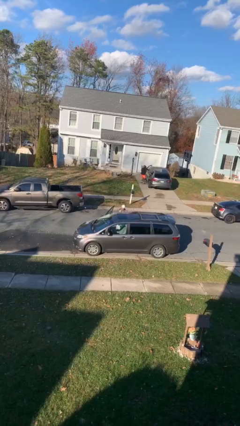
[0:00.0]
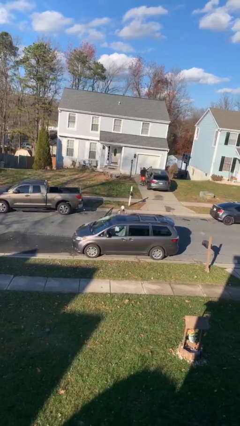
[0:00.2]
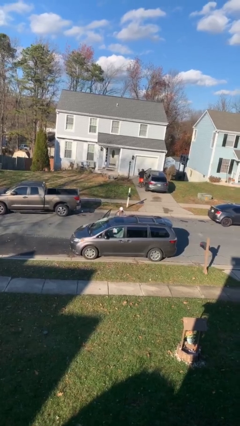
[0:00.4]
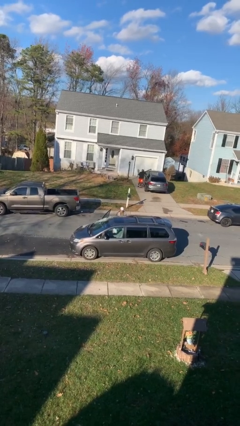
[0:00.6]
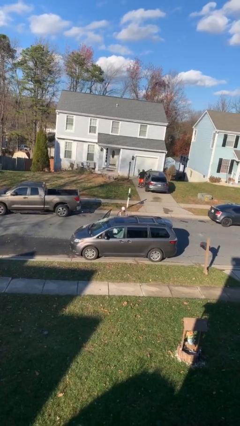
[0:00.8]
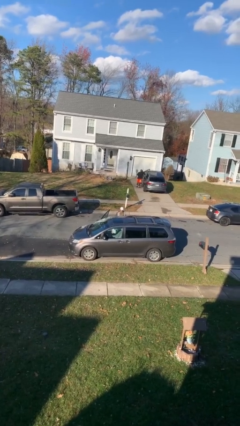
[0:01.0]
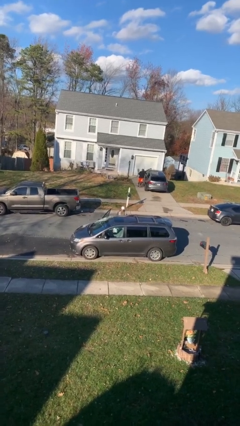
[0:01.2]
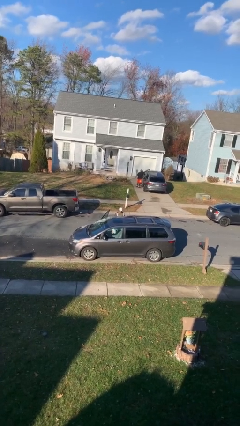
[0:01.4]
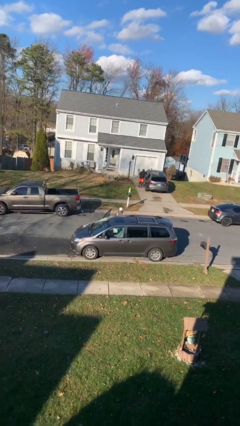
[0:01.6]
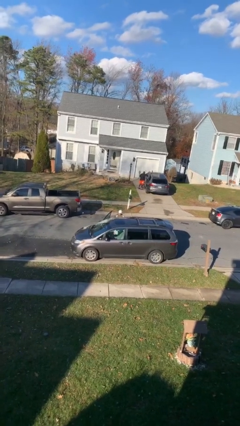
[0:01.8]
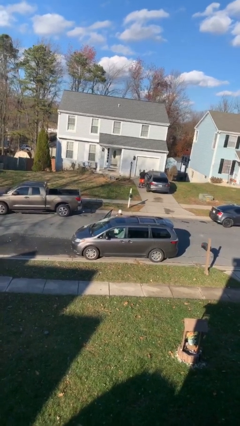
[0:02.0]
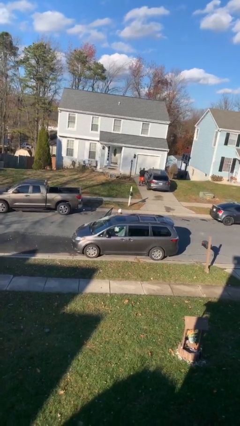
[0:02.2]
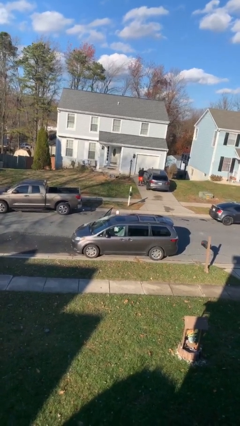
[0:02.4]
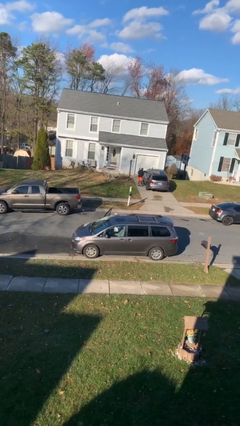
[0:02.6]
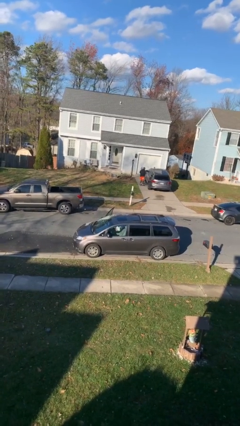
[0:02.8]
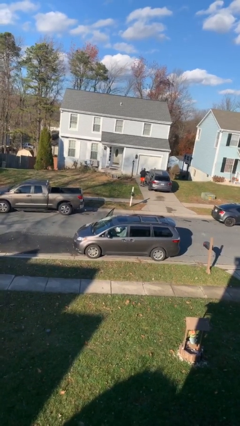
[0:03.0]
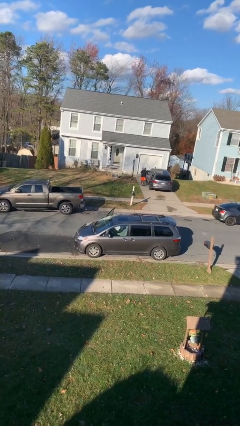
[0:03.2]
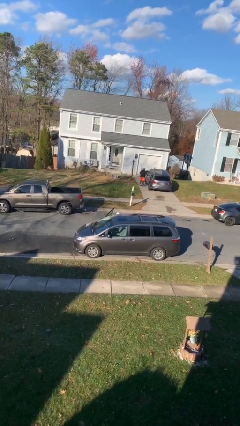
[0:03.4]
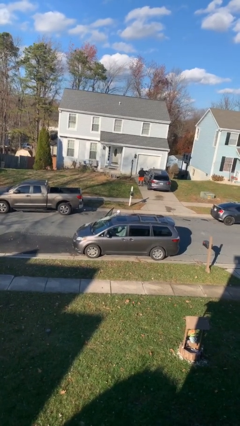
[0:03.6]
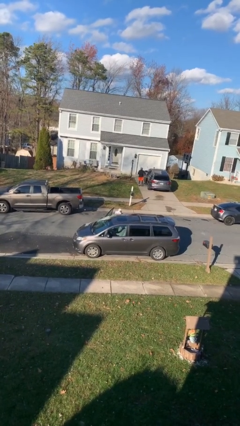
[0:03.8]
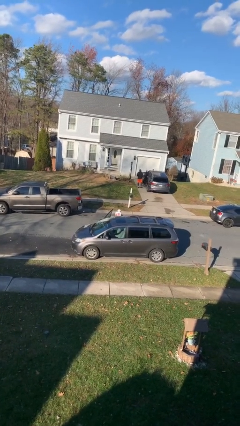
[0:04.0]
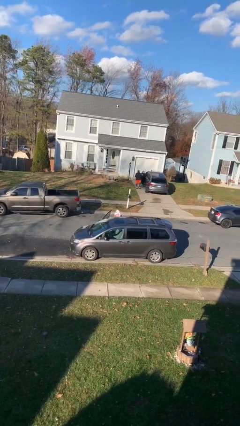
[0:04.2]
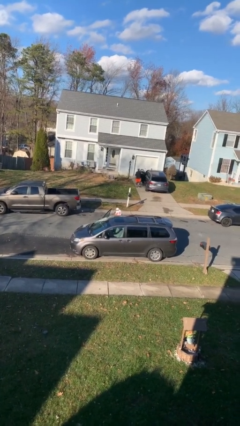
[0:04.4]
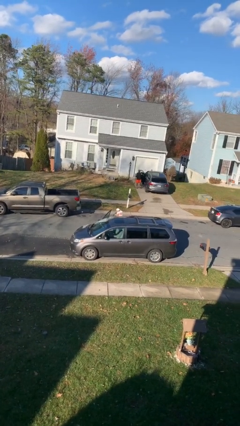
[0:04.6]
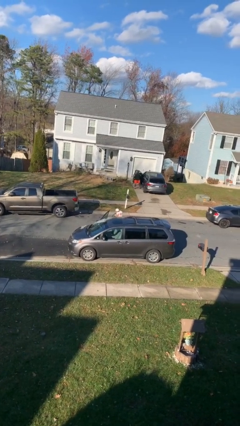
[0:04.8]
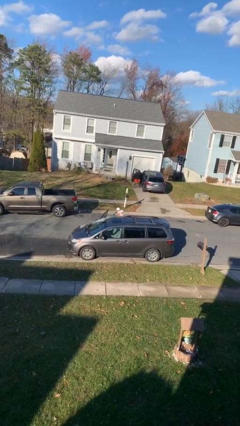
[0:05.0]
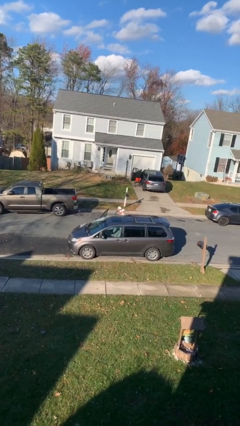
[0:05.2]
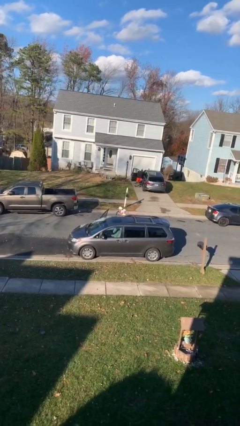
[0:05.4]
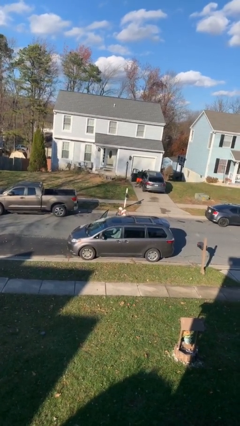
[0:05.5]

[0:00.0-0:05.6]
person unloads car

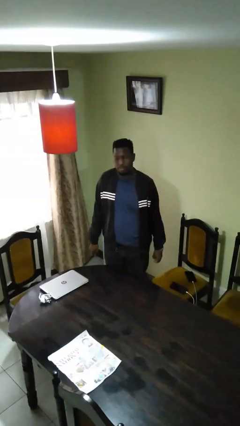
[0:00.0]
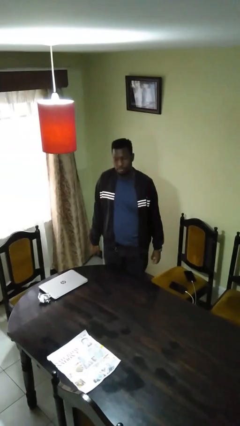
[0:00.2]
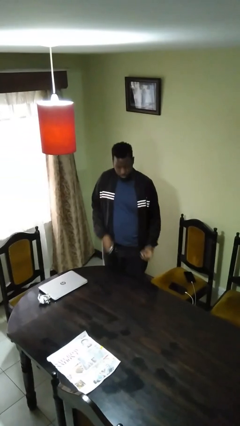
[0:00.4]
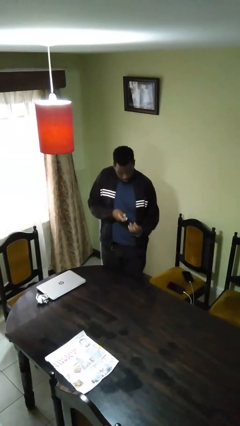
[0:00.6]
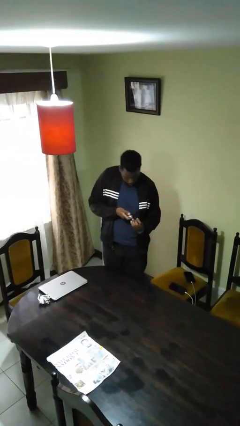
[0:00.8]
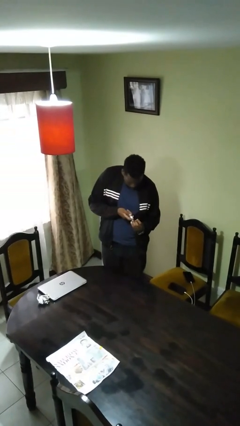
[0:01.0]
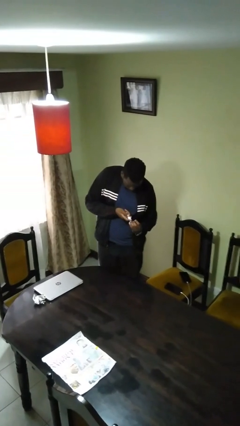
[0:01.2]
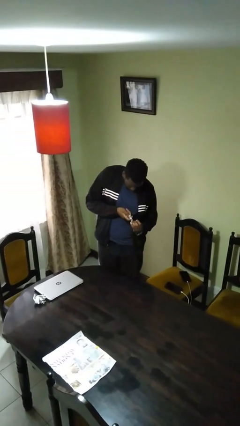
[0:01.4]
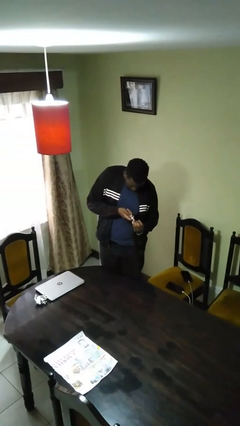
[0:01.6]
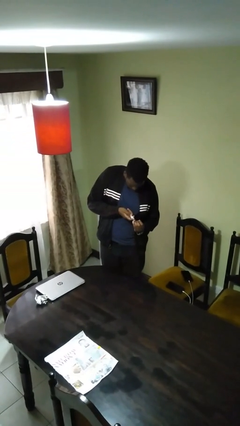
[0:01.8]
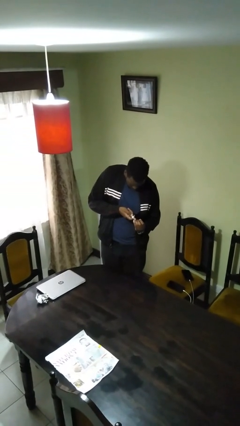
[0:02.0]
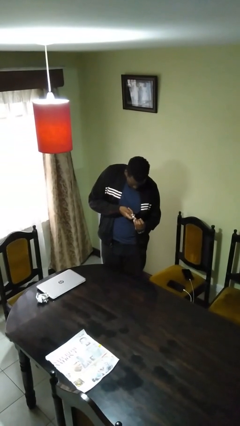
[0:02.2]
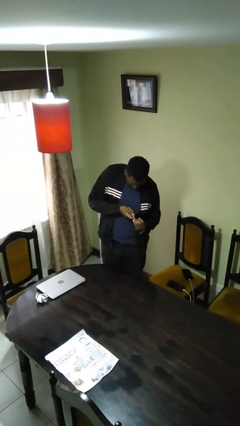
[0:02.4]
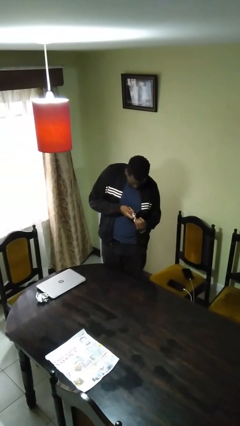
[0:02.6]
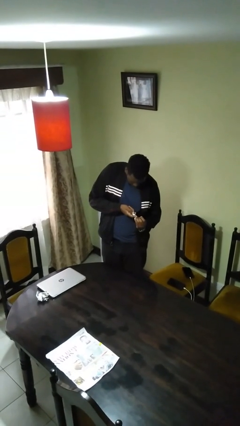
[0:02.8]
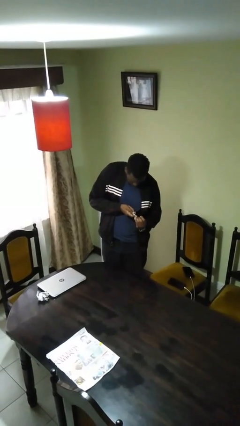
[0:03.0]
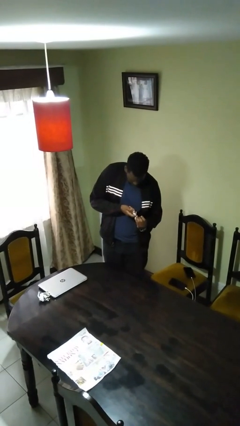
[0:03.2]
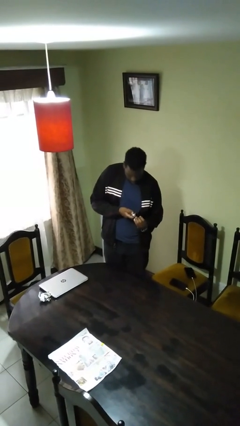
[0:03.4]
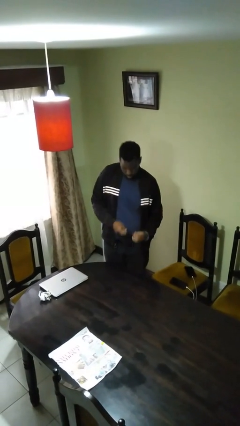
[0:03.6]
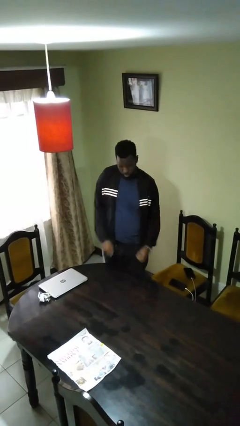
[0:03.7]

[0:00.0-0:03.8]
person clips fingernails

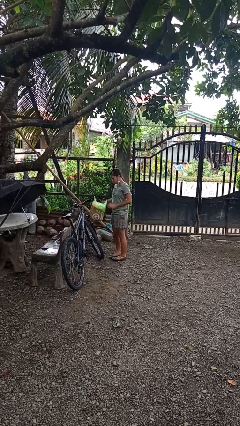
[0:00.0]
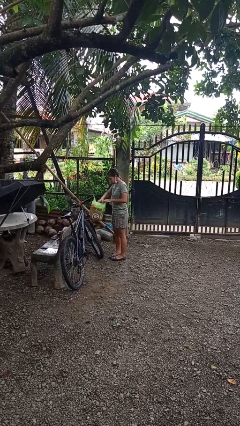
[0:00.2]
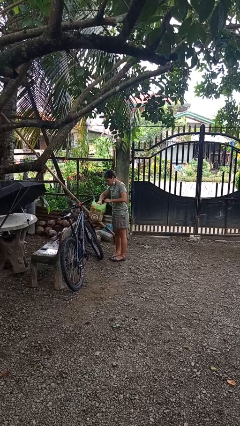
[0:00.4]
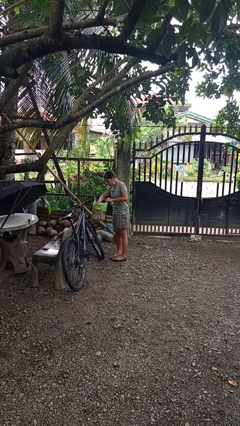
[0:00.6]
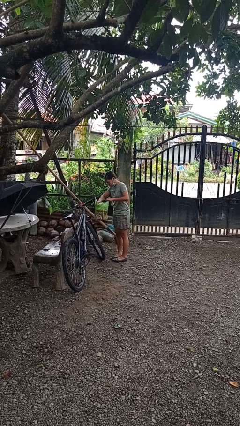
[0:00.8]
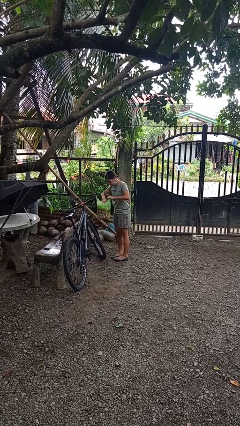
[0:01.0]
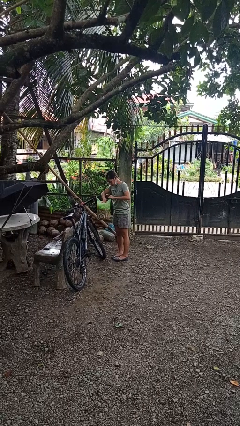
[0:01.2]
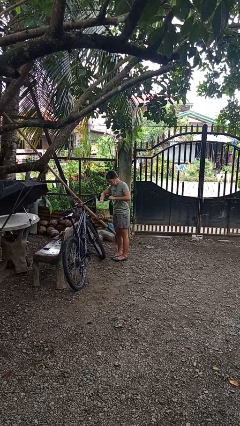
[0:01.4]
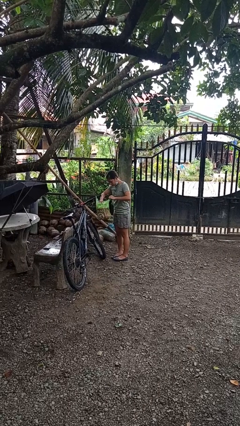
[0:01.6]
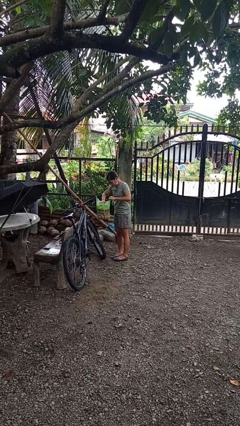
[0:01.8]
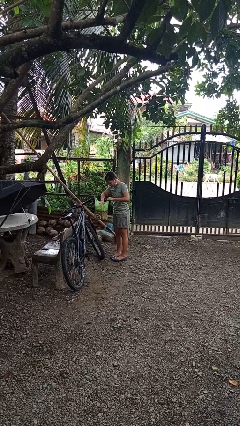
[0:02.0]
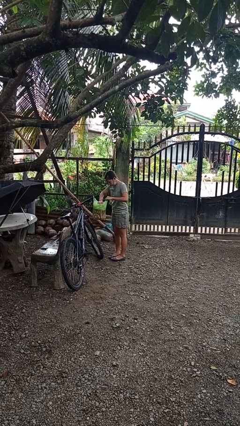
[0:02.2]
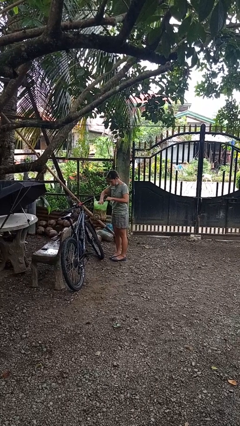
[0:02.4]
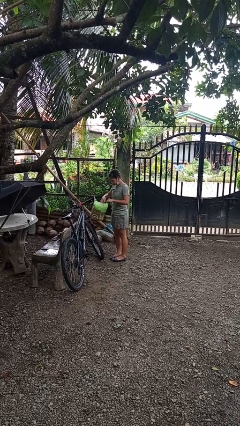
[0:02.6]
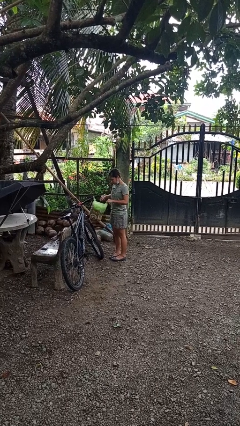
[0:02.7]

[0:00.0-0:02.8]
person searches in bag

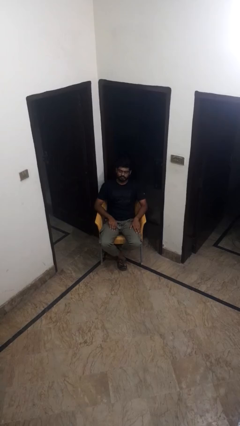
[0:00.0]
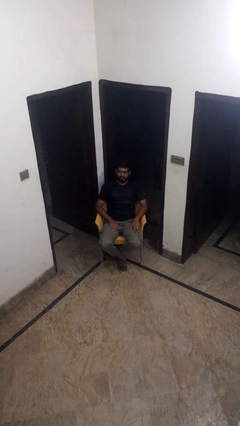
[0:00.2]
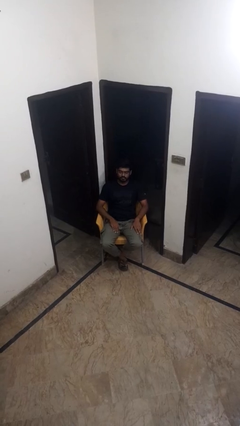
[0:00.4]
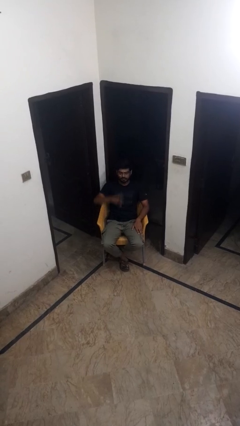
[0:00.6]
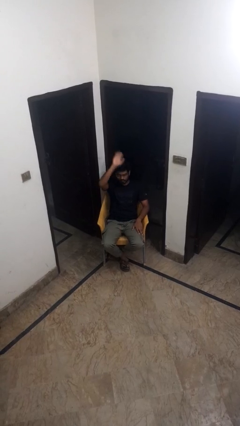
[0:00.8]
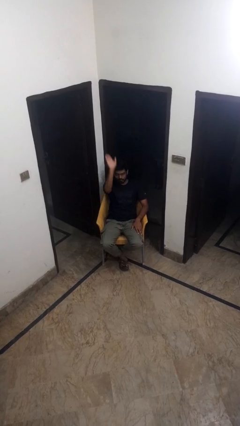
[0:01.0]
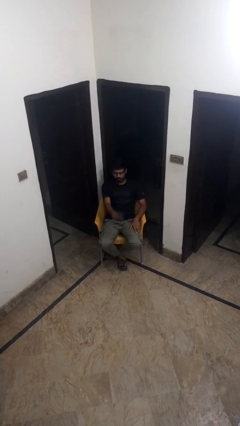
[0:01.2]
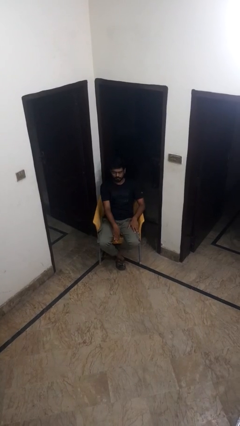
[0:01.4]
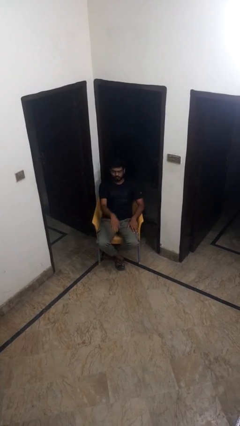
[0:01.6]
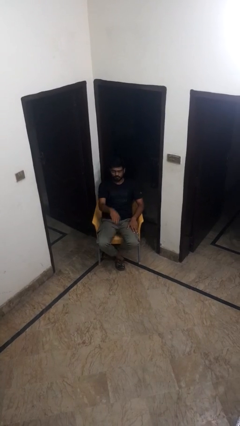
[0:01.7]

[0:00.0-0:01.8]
person gestures swipe down

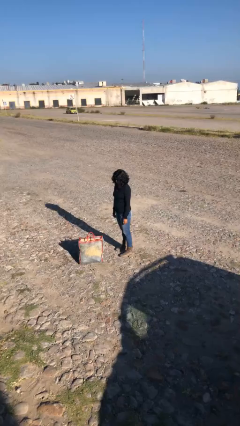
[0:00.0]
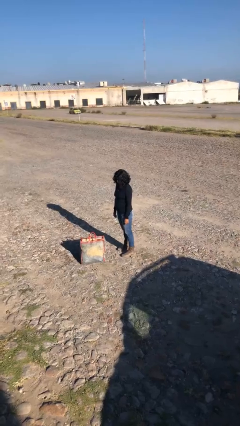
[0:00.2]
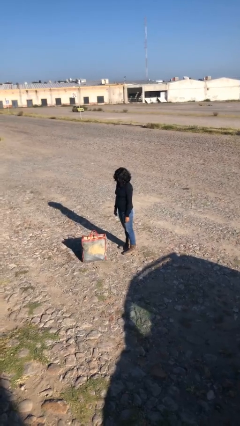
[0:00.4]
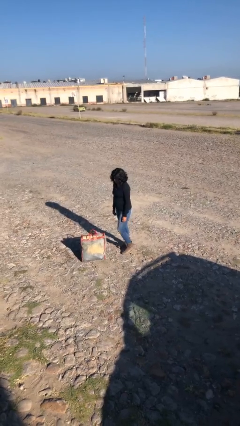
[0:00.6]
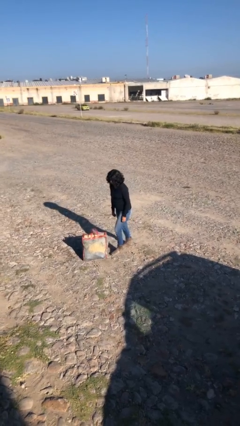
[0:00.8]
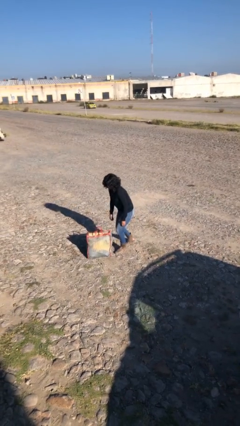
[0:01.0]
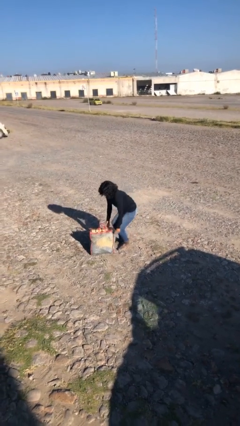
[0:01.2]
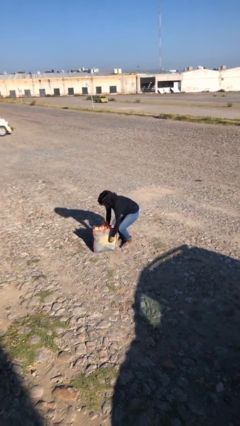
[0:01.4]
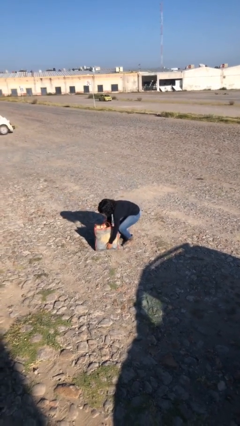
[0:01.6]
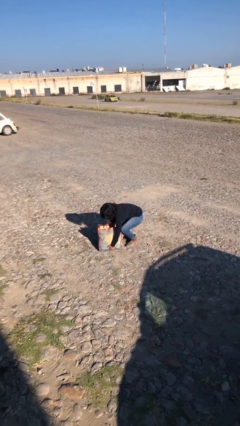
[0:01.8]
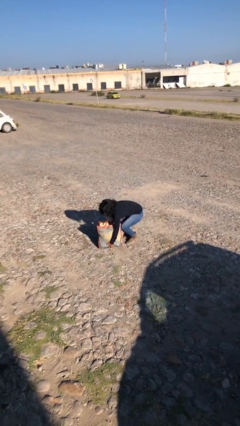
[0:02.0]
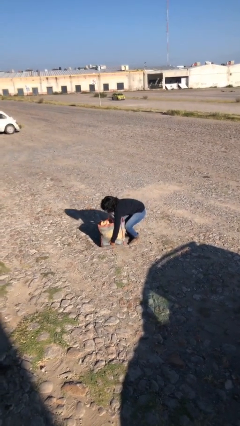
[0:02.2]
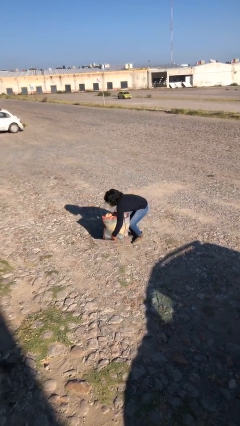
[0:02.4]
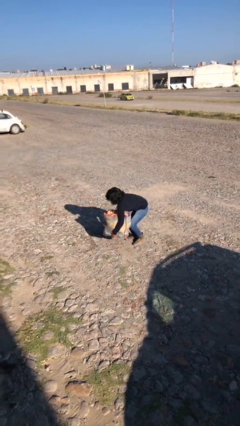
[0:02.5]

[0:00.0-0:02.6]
person picks up object from floor

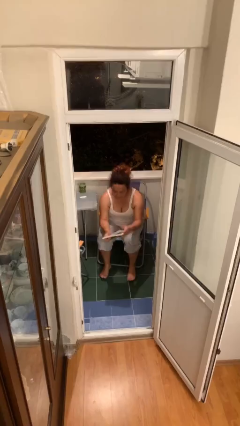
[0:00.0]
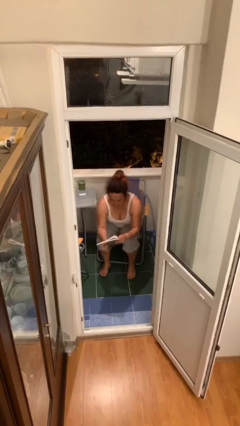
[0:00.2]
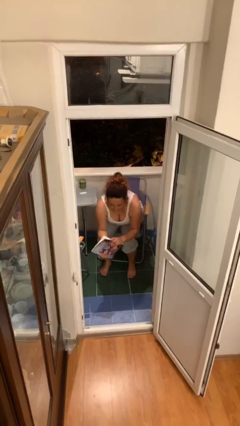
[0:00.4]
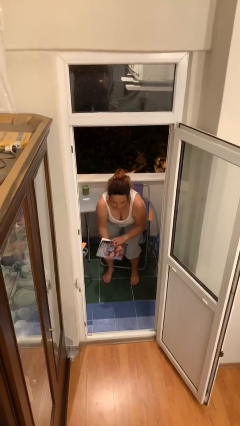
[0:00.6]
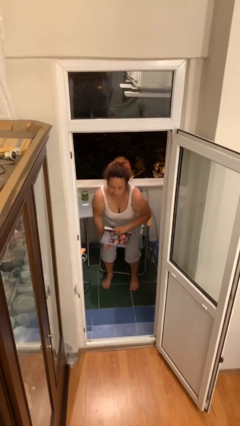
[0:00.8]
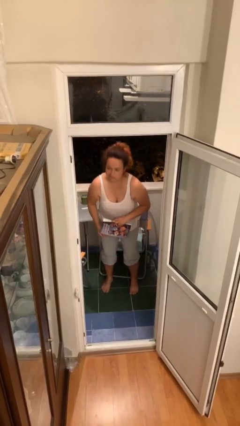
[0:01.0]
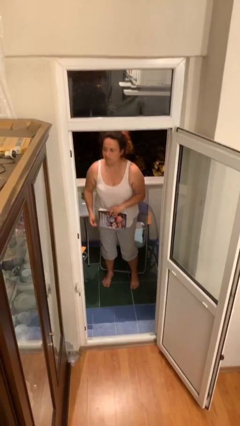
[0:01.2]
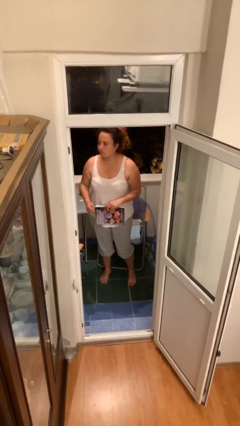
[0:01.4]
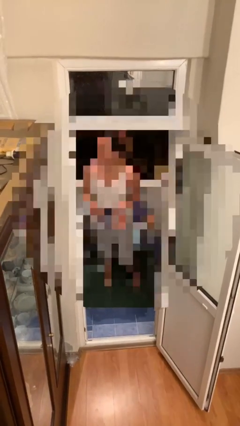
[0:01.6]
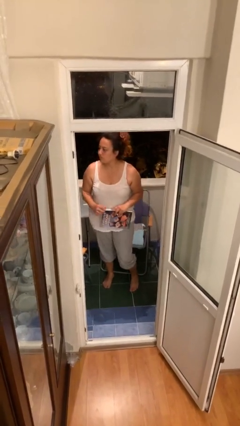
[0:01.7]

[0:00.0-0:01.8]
person stands up
